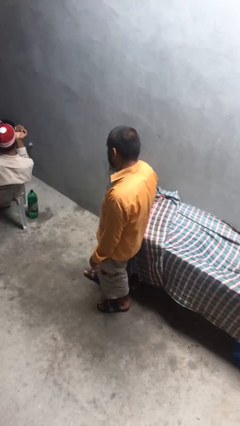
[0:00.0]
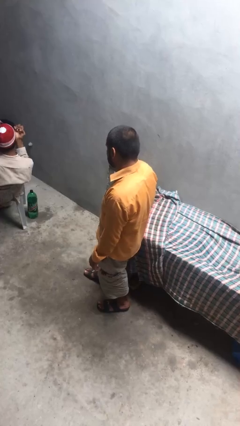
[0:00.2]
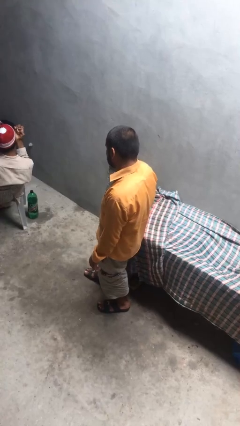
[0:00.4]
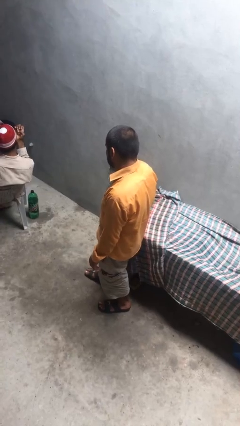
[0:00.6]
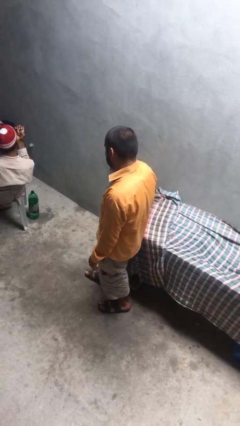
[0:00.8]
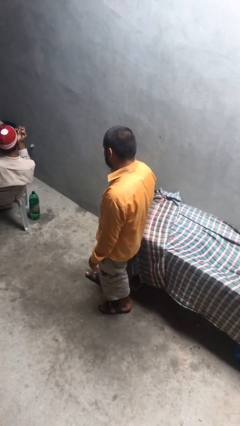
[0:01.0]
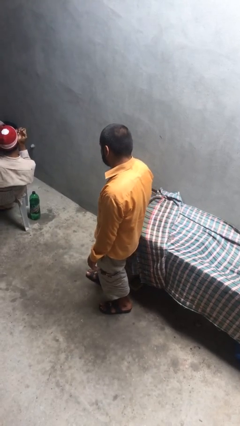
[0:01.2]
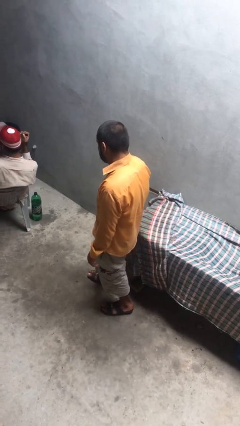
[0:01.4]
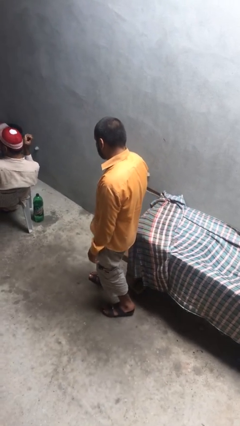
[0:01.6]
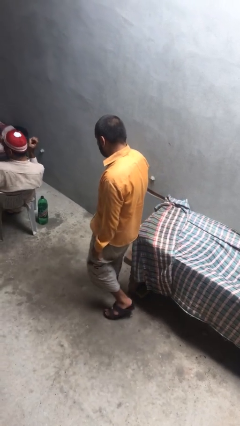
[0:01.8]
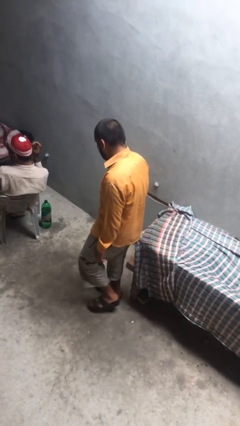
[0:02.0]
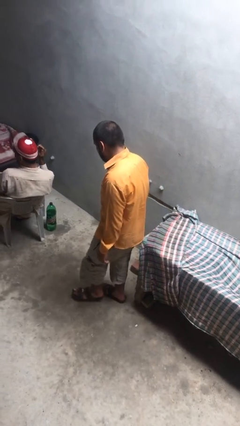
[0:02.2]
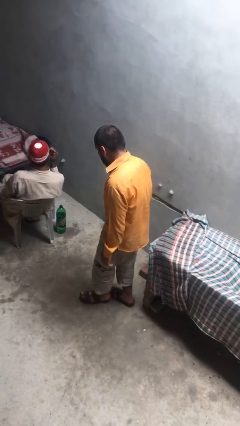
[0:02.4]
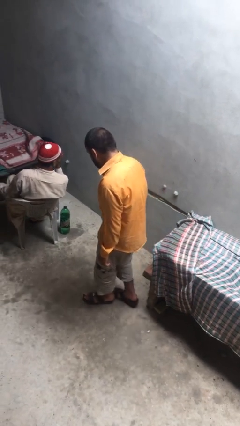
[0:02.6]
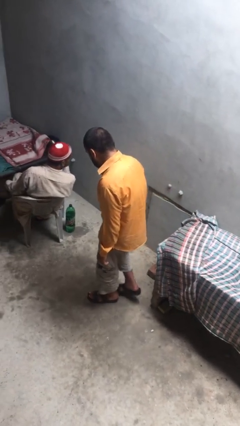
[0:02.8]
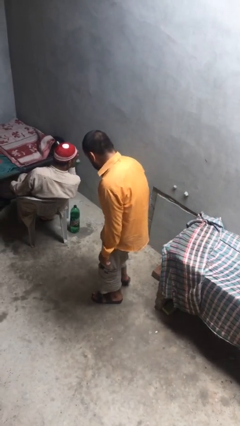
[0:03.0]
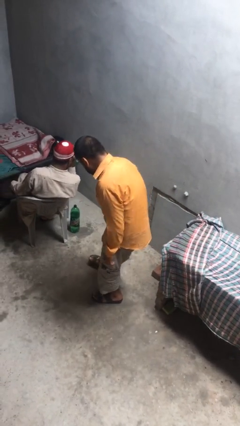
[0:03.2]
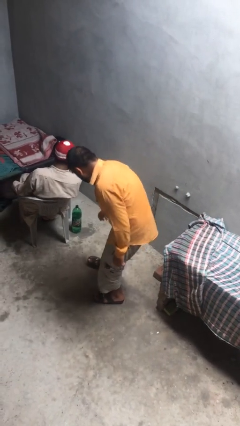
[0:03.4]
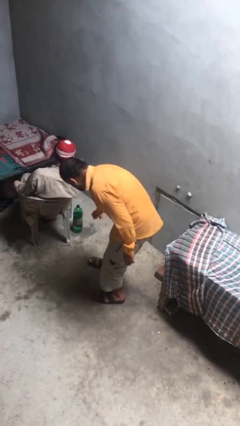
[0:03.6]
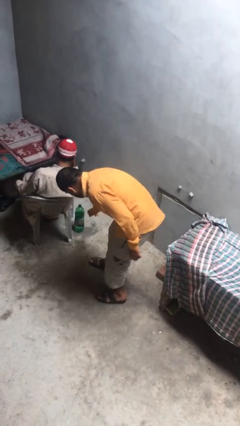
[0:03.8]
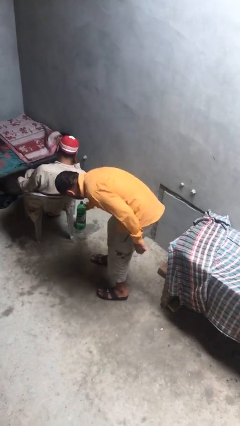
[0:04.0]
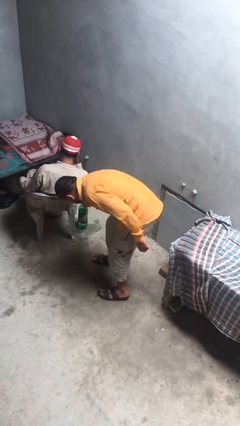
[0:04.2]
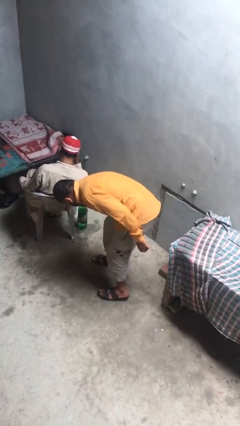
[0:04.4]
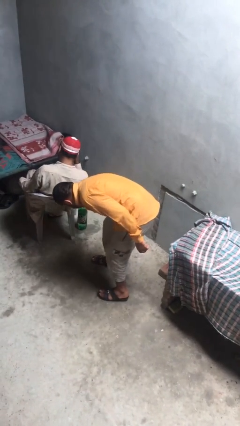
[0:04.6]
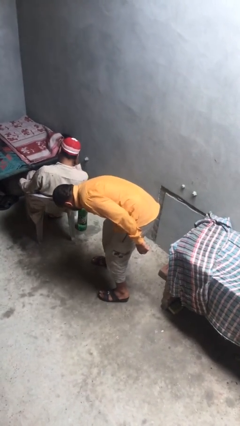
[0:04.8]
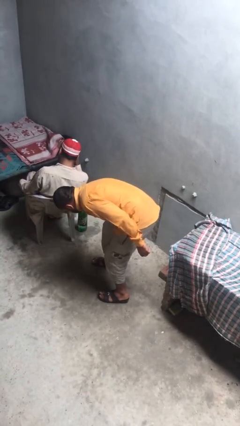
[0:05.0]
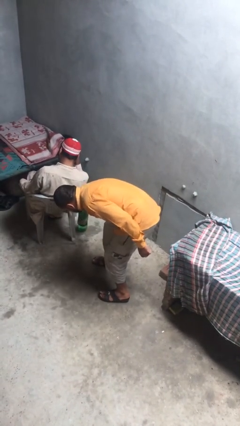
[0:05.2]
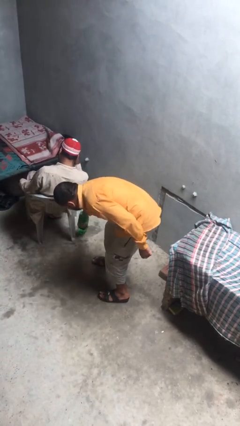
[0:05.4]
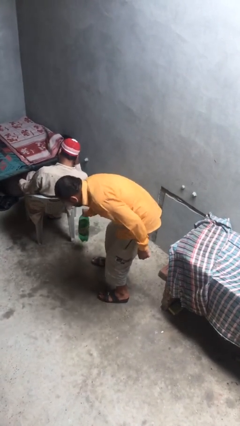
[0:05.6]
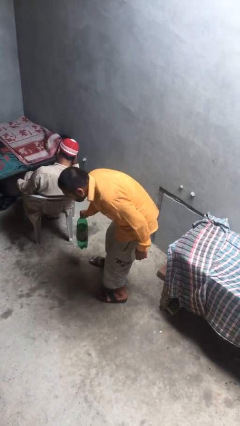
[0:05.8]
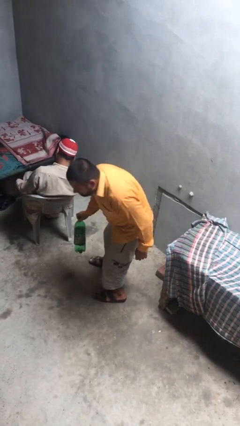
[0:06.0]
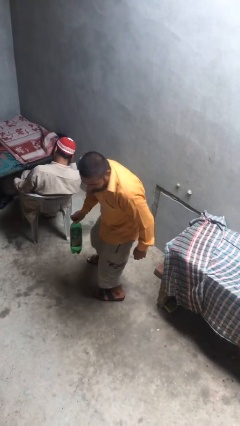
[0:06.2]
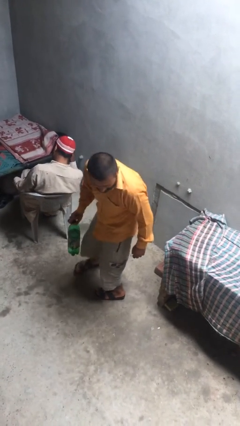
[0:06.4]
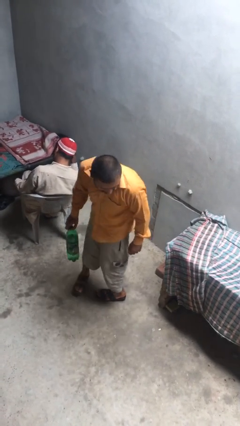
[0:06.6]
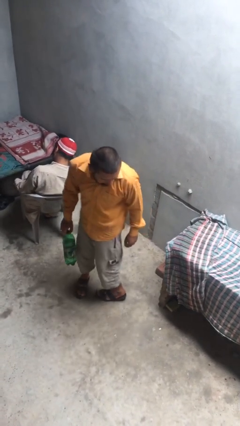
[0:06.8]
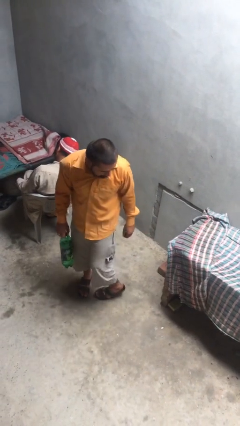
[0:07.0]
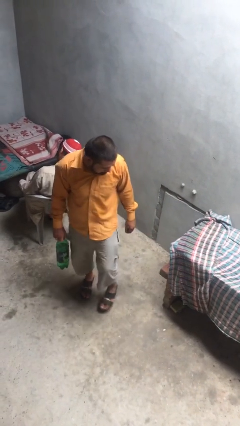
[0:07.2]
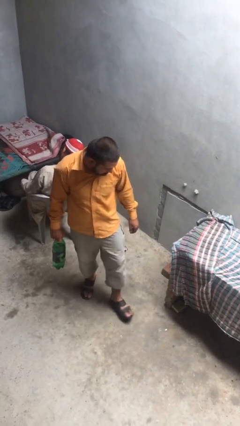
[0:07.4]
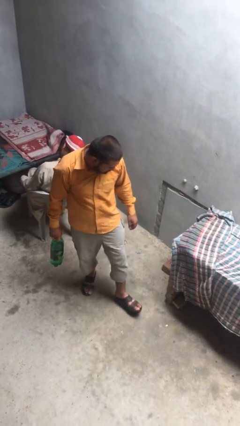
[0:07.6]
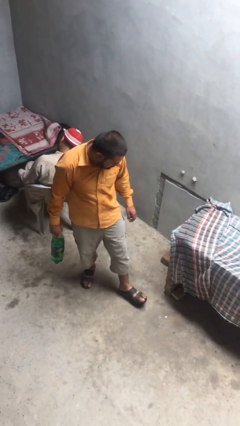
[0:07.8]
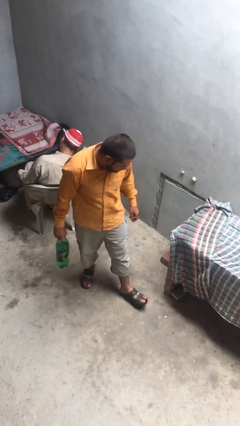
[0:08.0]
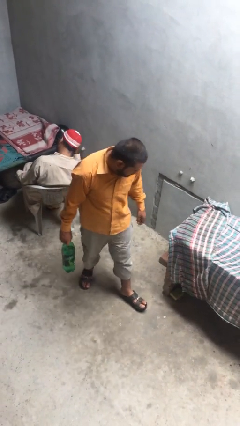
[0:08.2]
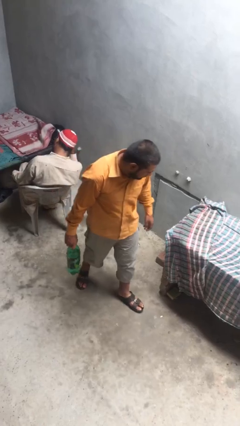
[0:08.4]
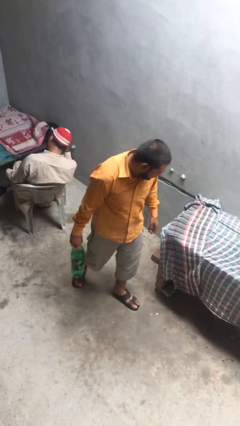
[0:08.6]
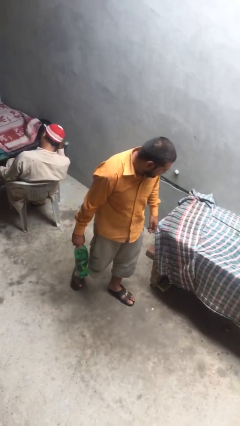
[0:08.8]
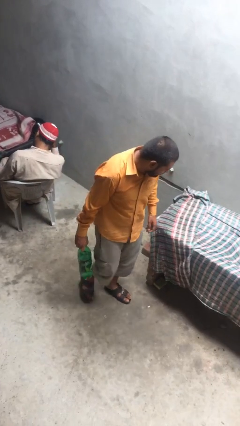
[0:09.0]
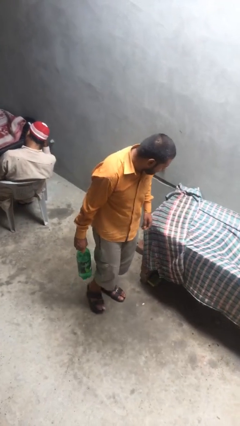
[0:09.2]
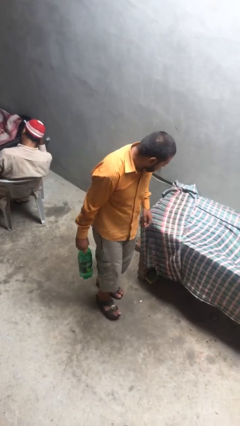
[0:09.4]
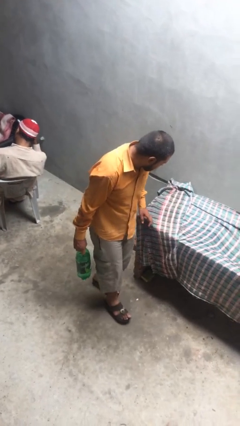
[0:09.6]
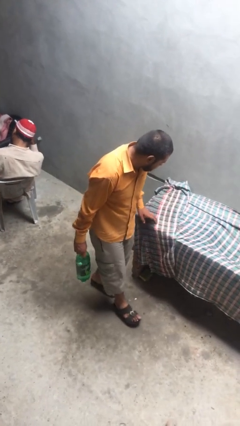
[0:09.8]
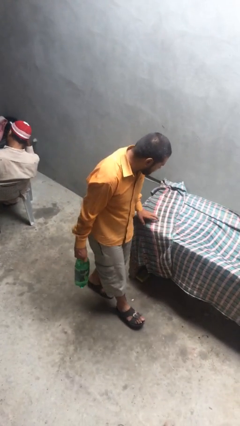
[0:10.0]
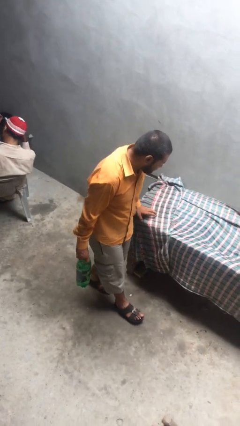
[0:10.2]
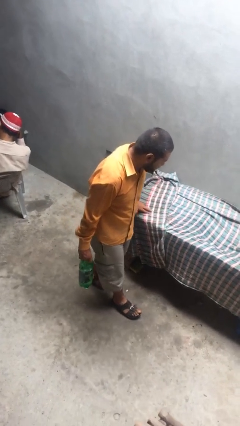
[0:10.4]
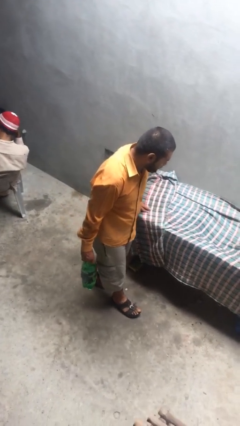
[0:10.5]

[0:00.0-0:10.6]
person steals object from person

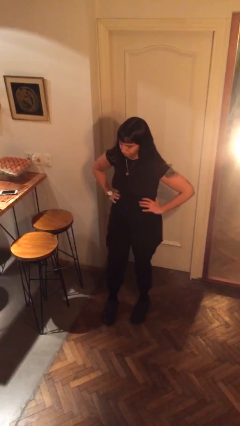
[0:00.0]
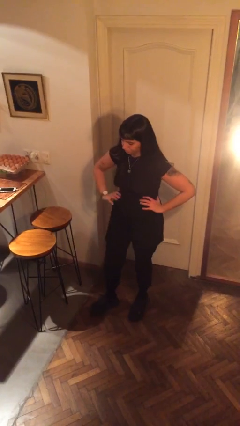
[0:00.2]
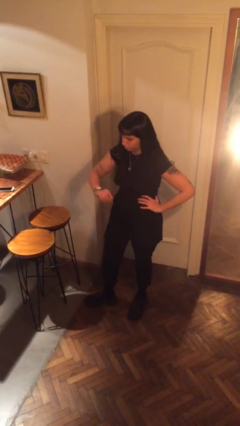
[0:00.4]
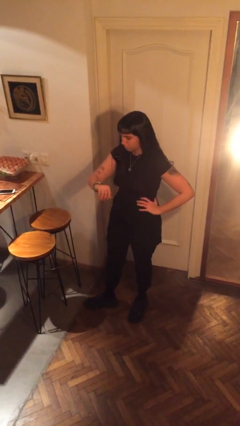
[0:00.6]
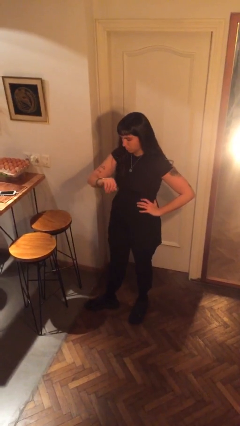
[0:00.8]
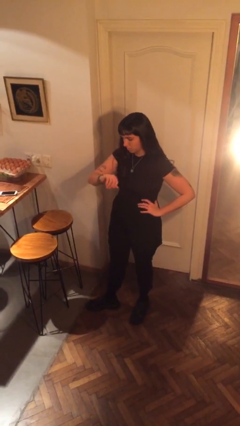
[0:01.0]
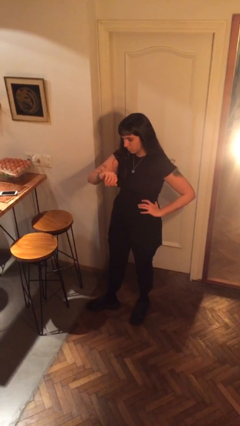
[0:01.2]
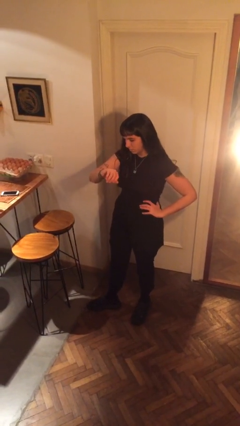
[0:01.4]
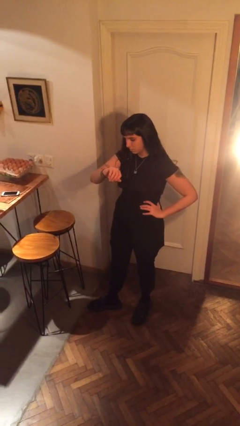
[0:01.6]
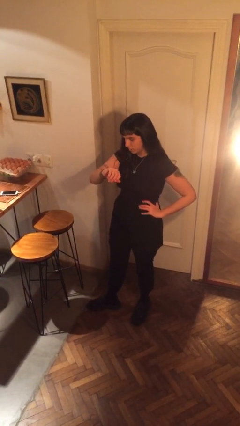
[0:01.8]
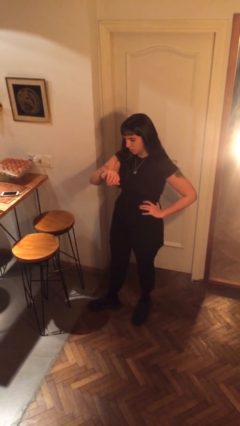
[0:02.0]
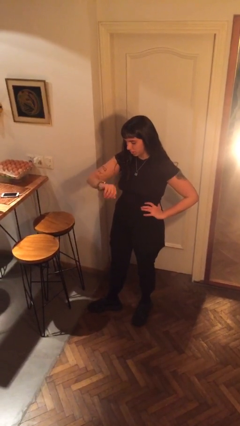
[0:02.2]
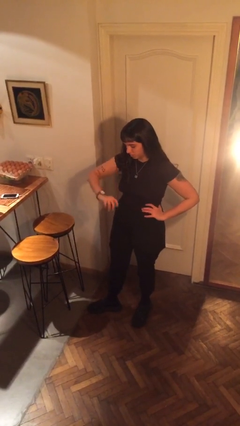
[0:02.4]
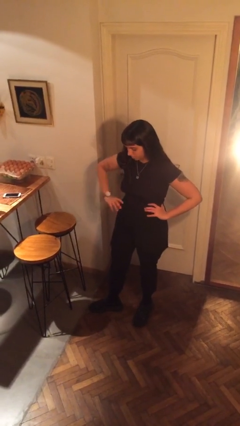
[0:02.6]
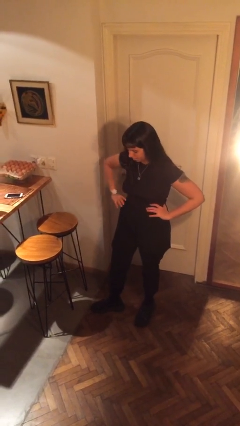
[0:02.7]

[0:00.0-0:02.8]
person looks at wristwatch

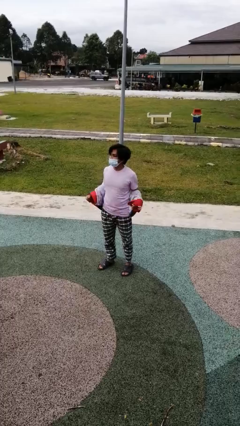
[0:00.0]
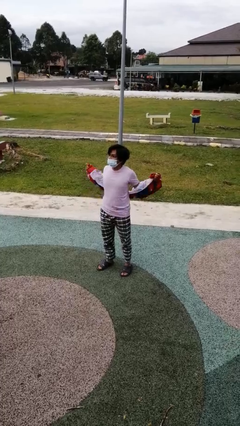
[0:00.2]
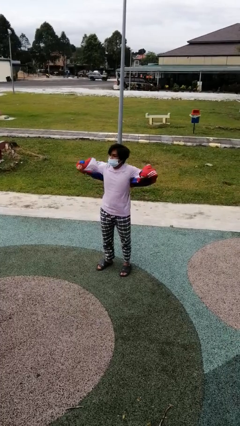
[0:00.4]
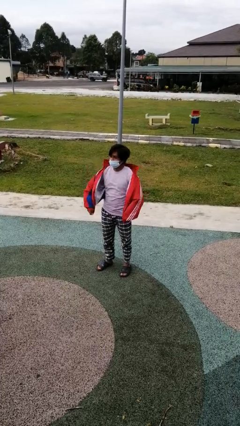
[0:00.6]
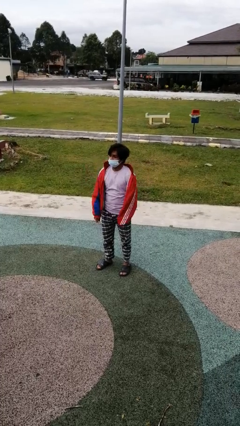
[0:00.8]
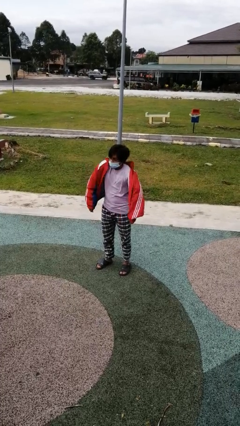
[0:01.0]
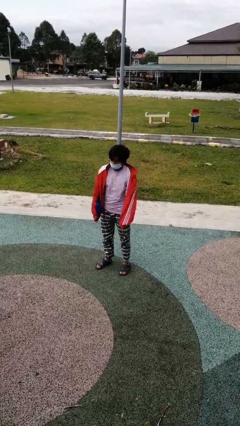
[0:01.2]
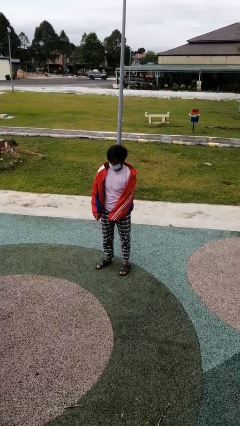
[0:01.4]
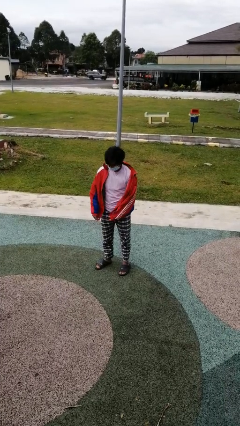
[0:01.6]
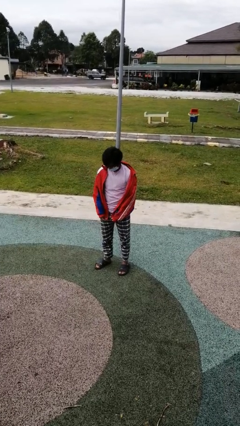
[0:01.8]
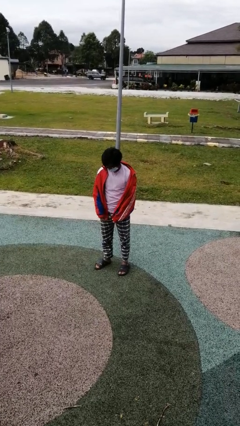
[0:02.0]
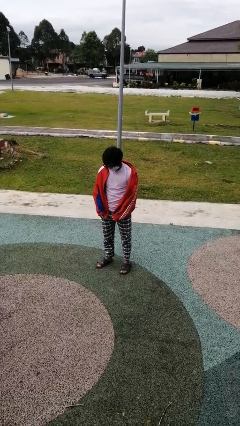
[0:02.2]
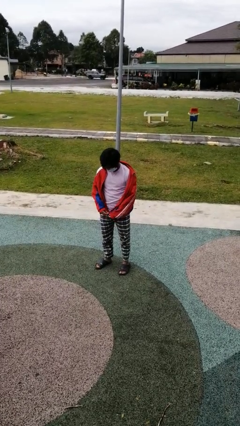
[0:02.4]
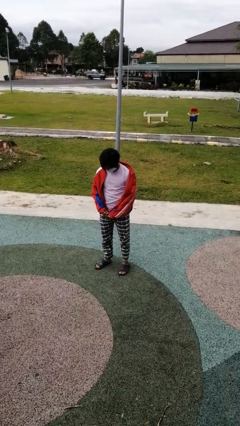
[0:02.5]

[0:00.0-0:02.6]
person puts on jacket

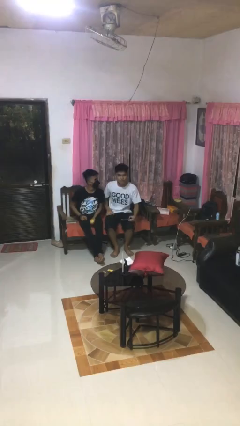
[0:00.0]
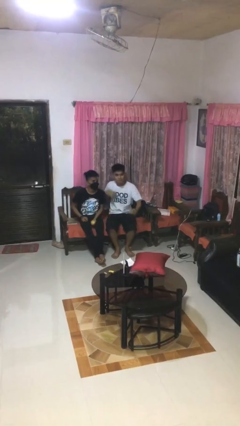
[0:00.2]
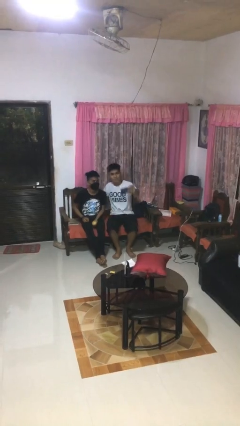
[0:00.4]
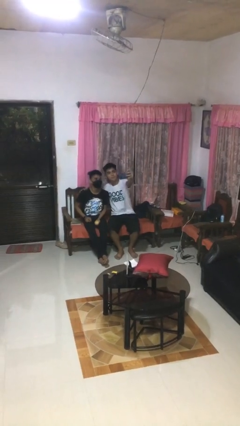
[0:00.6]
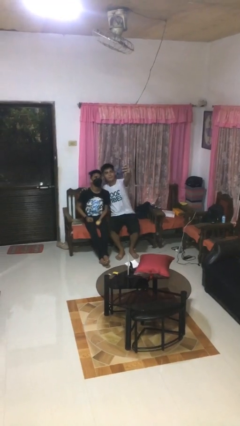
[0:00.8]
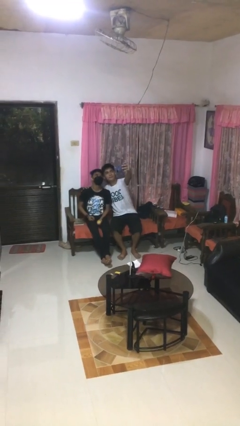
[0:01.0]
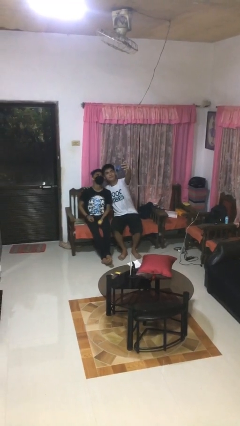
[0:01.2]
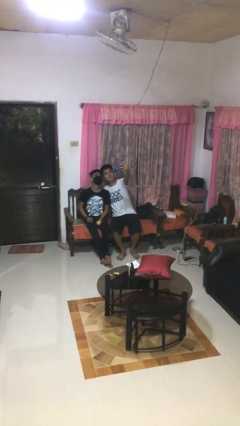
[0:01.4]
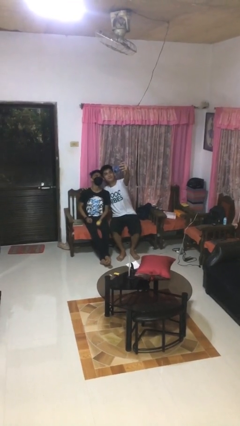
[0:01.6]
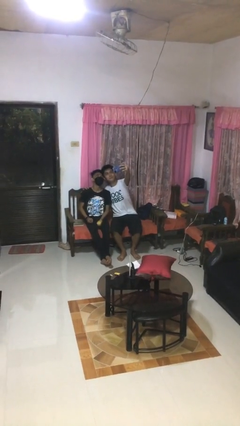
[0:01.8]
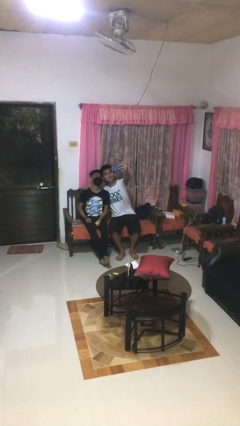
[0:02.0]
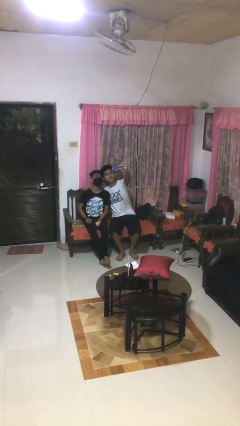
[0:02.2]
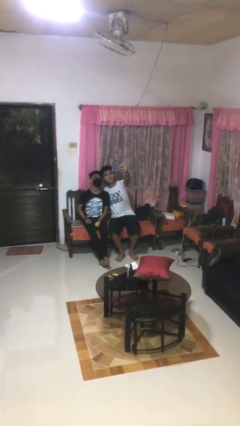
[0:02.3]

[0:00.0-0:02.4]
person takes selfie with person
